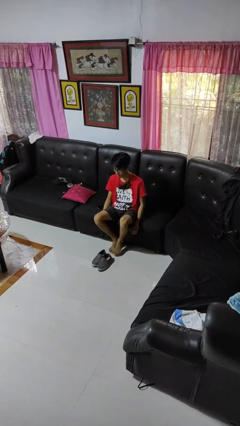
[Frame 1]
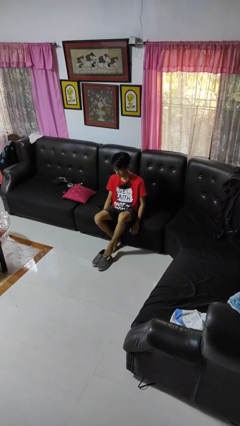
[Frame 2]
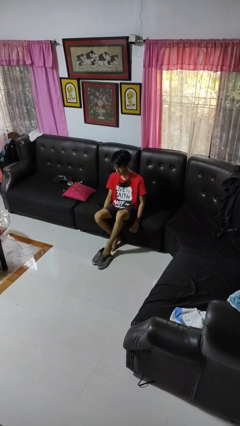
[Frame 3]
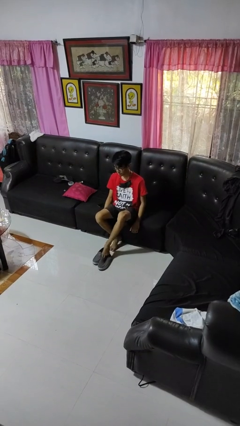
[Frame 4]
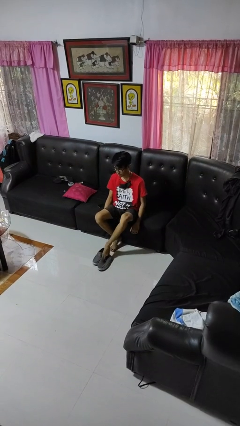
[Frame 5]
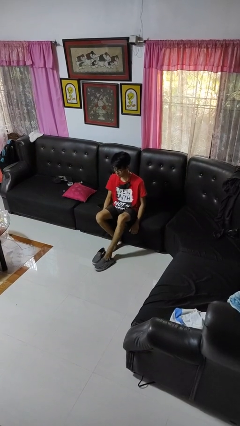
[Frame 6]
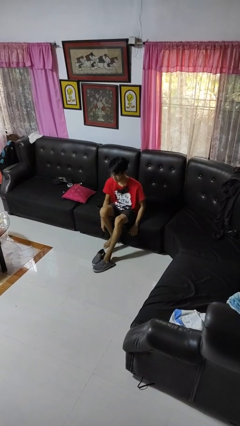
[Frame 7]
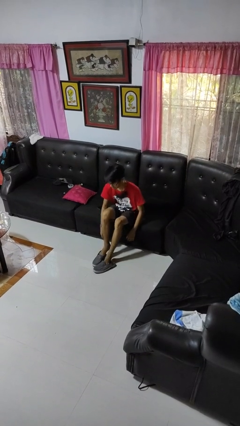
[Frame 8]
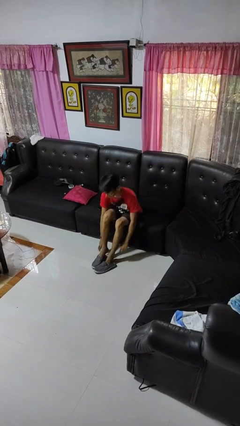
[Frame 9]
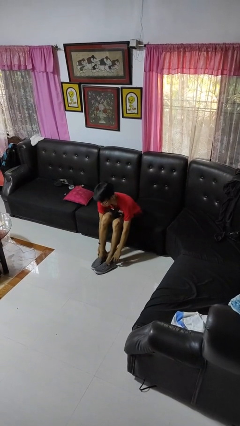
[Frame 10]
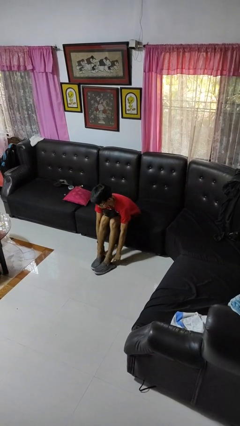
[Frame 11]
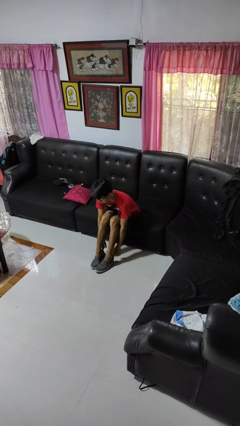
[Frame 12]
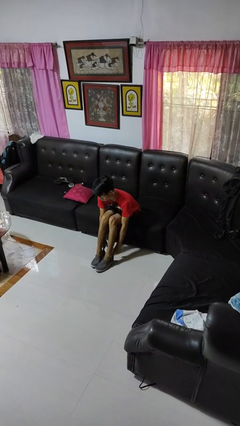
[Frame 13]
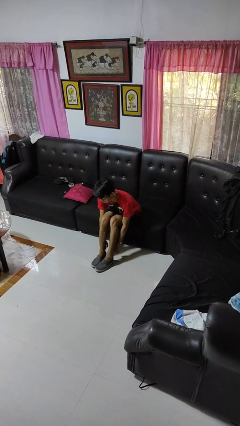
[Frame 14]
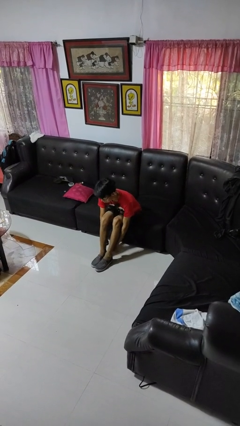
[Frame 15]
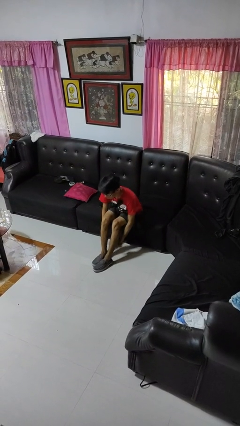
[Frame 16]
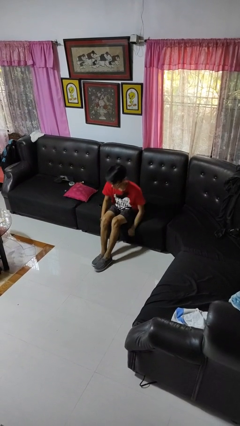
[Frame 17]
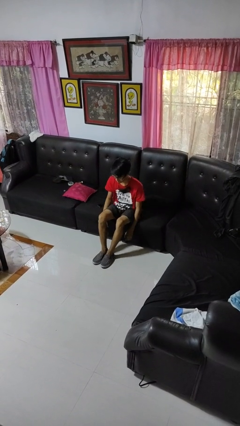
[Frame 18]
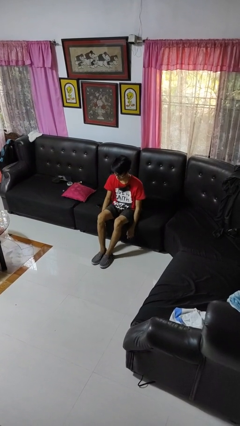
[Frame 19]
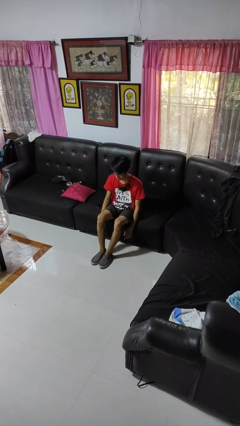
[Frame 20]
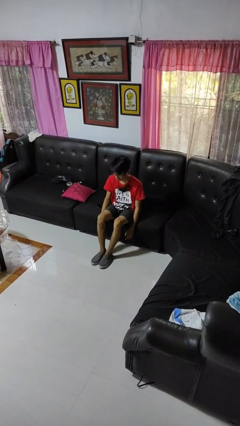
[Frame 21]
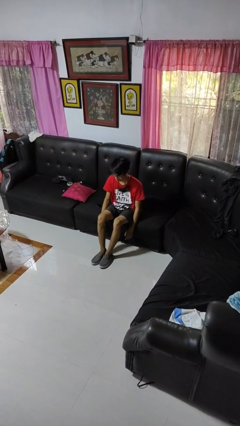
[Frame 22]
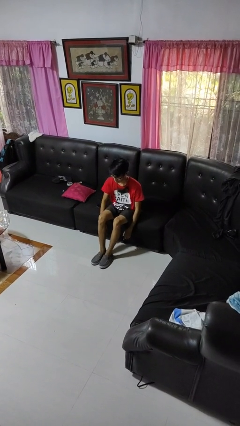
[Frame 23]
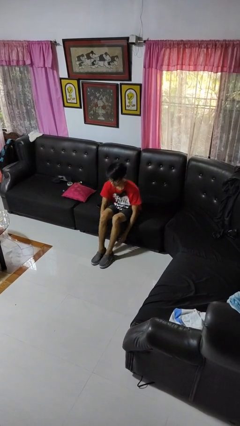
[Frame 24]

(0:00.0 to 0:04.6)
person puts on shoes

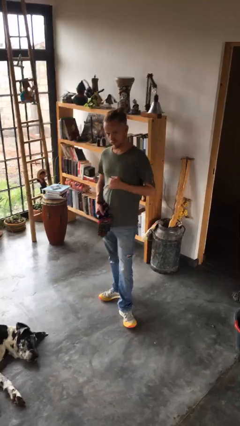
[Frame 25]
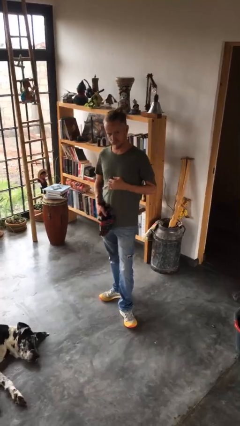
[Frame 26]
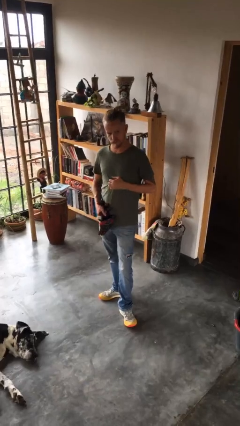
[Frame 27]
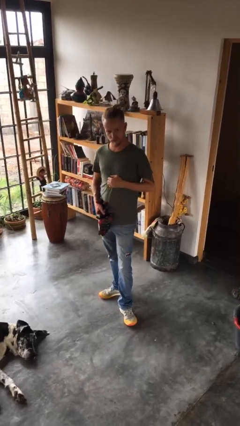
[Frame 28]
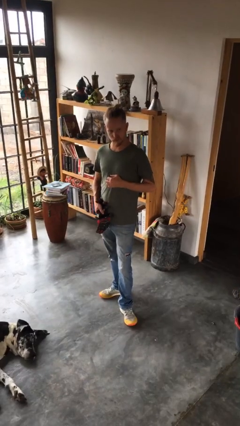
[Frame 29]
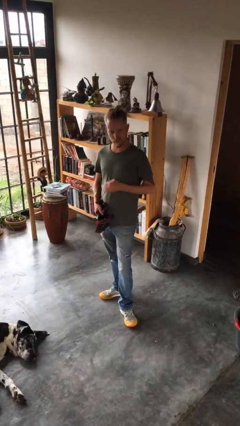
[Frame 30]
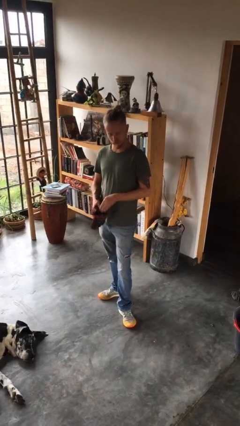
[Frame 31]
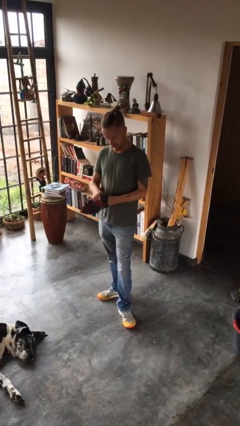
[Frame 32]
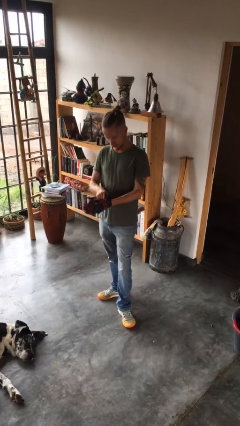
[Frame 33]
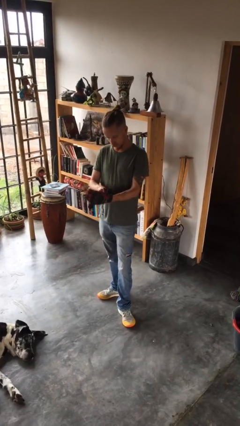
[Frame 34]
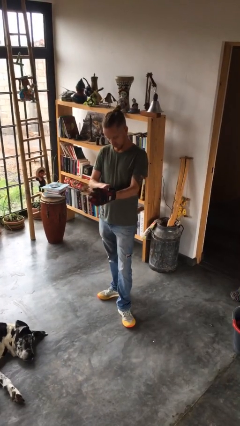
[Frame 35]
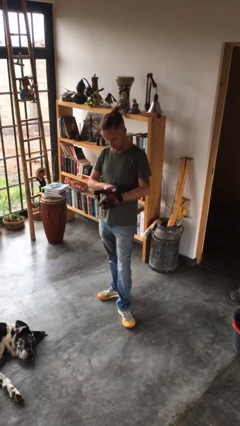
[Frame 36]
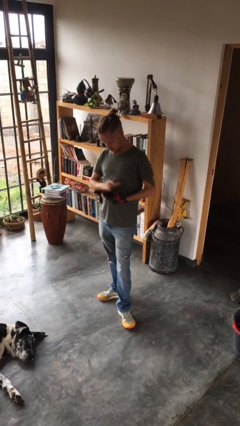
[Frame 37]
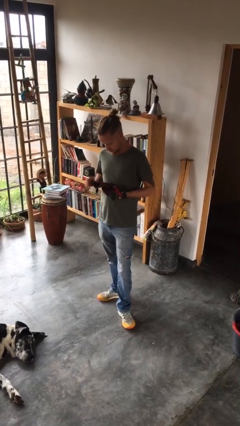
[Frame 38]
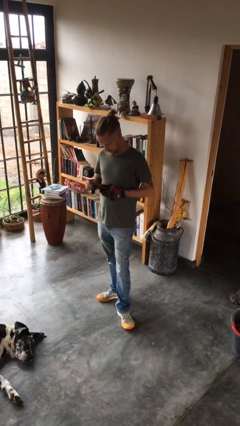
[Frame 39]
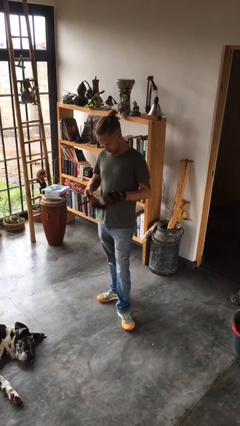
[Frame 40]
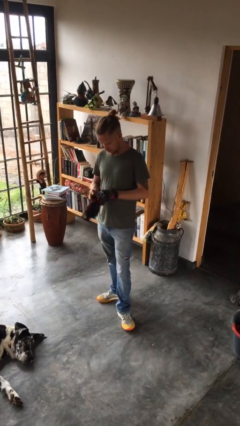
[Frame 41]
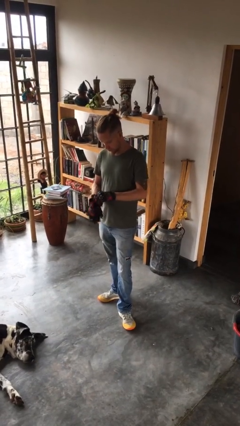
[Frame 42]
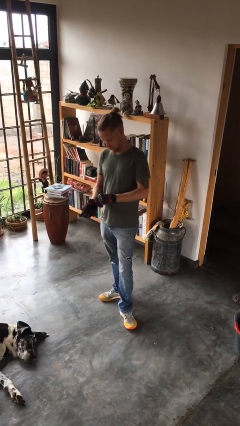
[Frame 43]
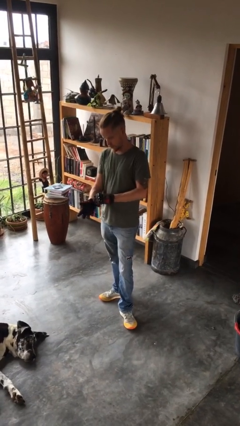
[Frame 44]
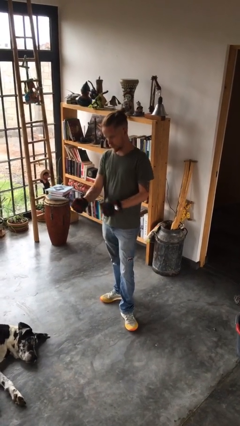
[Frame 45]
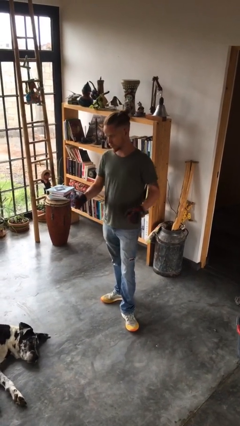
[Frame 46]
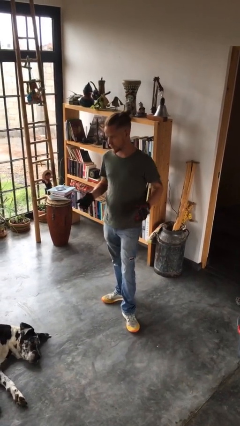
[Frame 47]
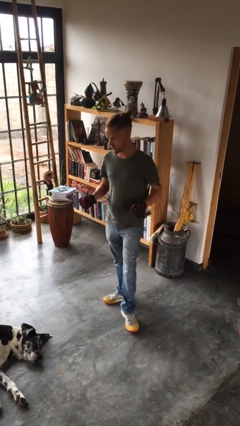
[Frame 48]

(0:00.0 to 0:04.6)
person puts on gloves

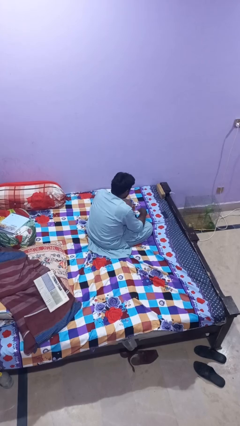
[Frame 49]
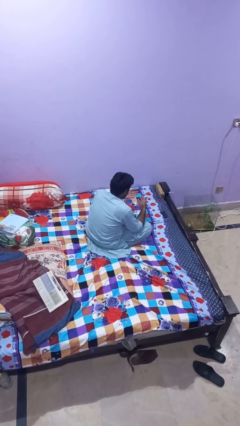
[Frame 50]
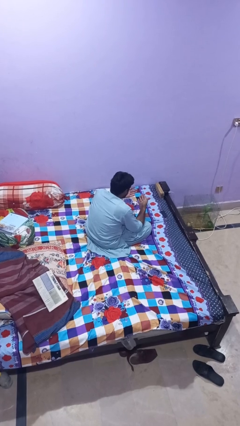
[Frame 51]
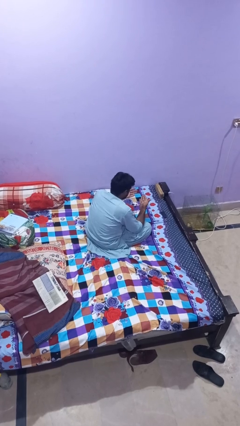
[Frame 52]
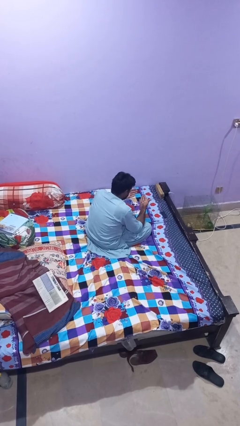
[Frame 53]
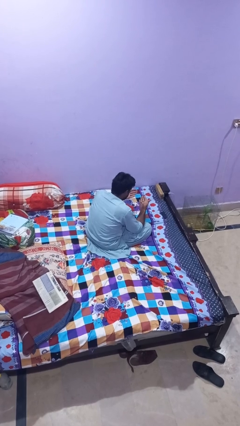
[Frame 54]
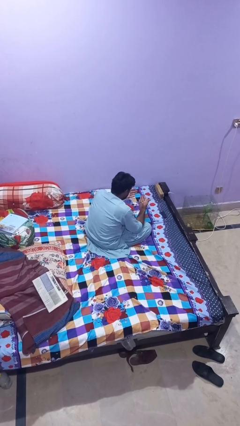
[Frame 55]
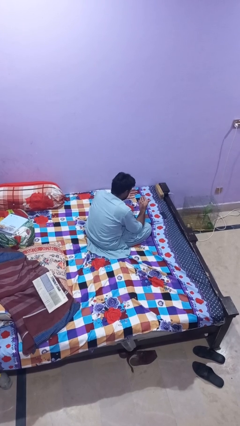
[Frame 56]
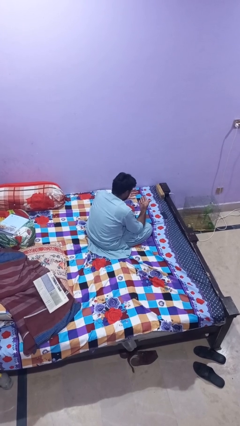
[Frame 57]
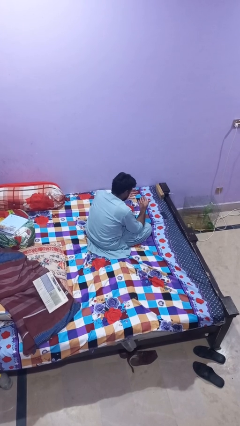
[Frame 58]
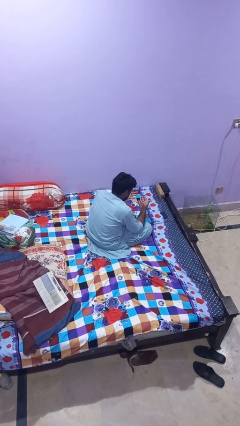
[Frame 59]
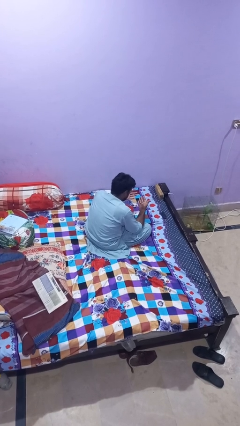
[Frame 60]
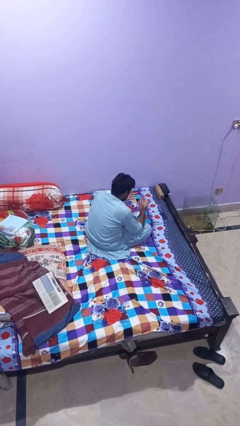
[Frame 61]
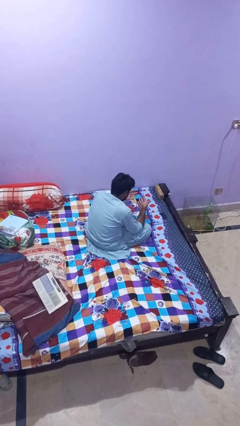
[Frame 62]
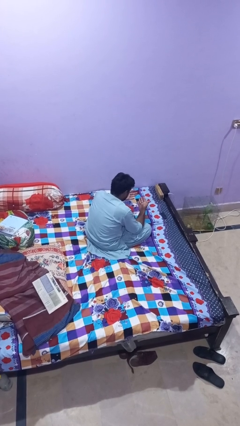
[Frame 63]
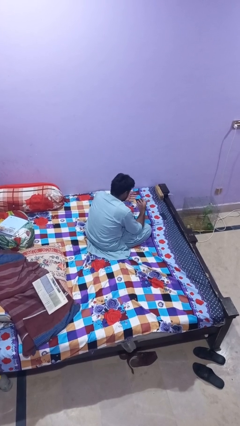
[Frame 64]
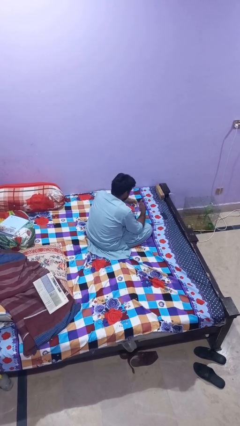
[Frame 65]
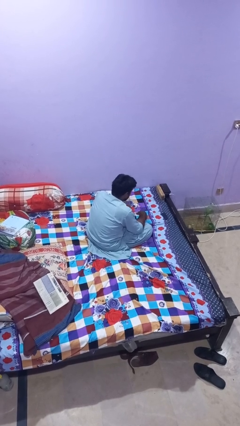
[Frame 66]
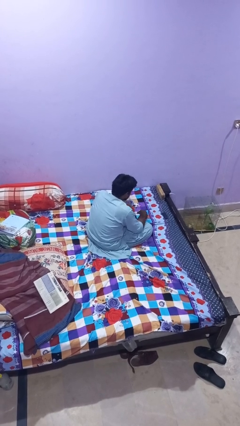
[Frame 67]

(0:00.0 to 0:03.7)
person looks at hands in lap

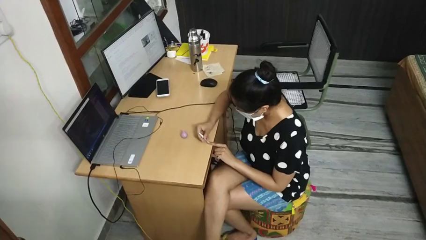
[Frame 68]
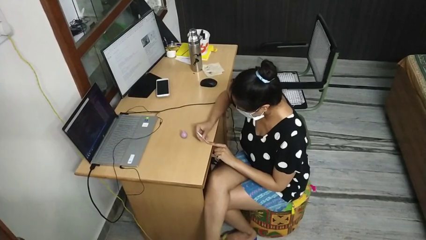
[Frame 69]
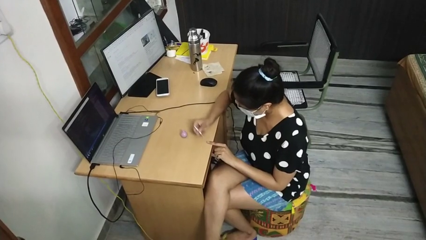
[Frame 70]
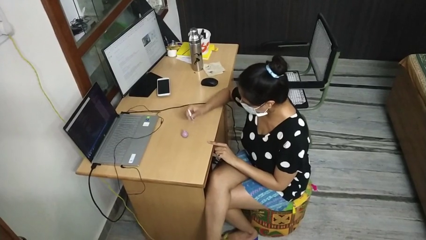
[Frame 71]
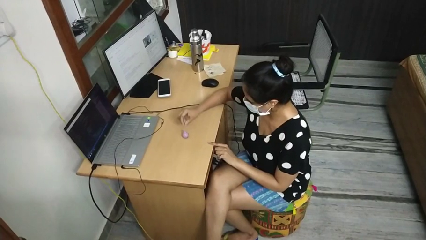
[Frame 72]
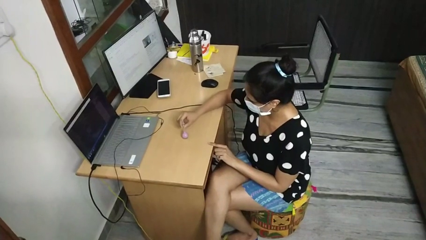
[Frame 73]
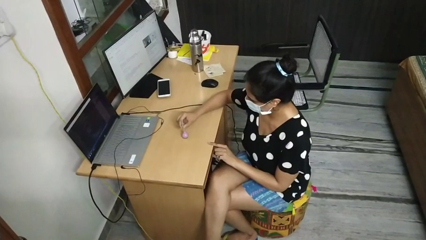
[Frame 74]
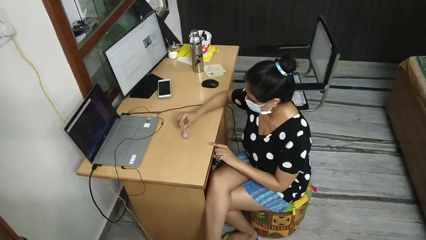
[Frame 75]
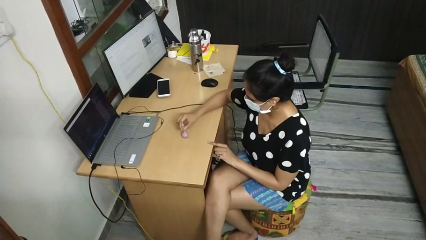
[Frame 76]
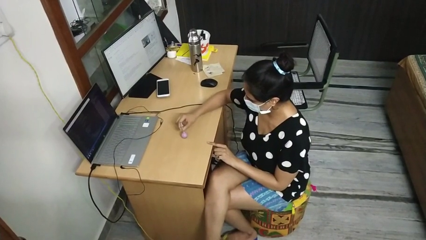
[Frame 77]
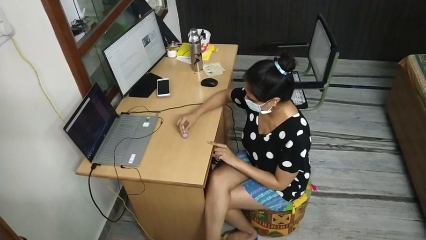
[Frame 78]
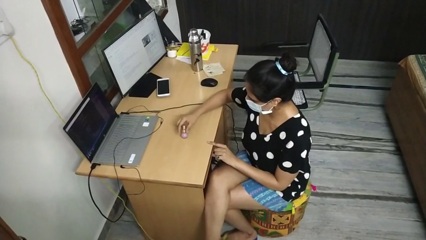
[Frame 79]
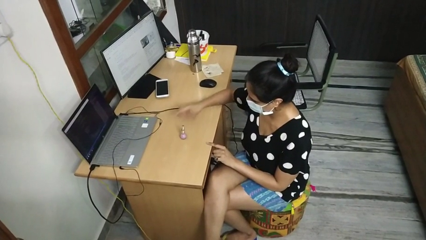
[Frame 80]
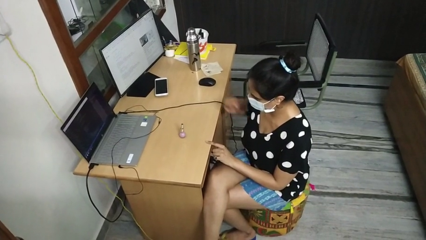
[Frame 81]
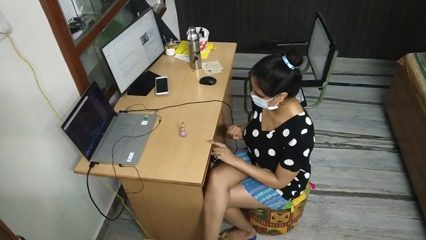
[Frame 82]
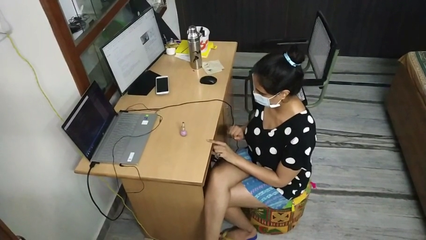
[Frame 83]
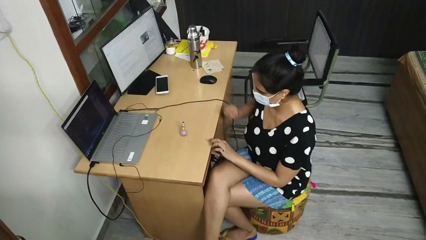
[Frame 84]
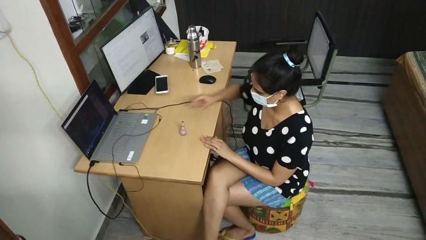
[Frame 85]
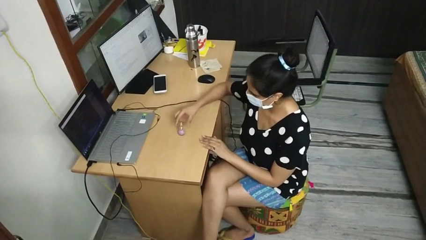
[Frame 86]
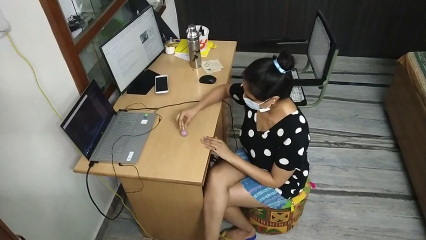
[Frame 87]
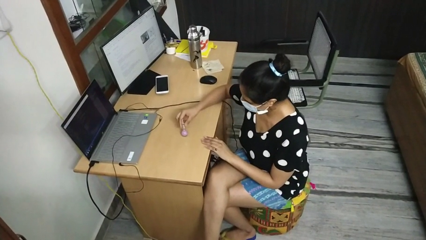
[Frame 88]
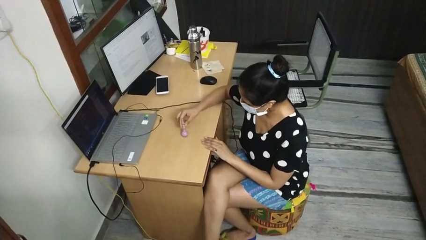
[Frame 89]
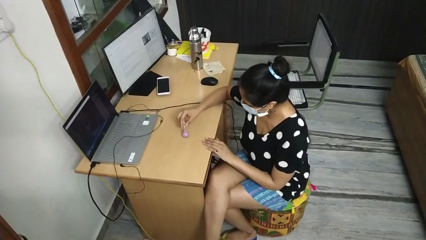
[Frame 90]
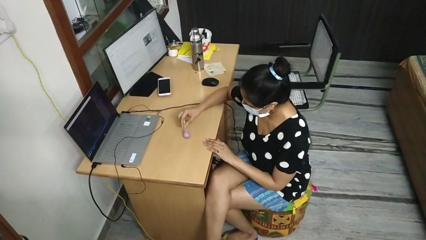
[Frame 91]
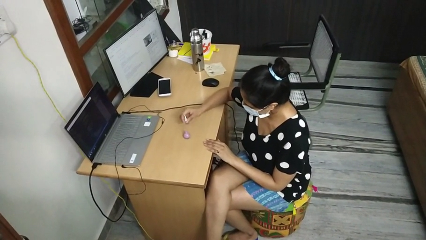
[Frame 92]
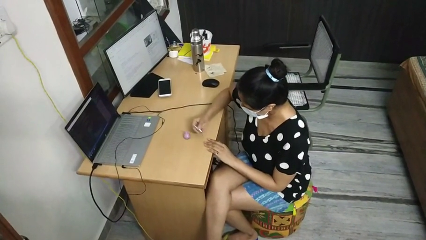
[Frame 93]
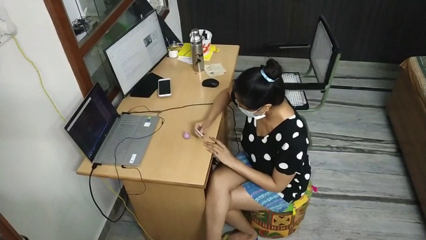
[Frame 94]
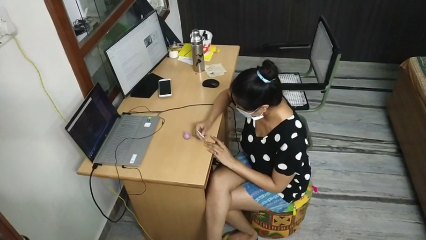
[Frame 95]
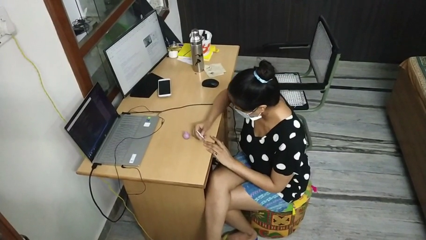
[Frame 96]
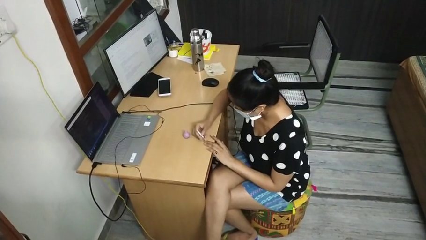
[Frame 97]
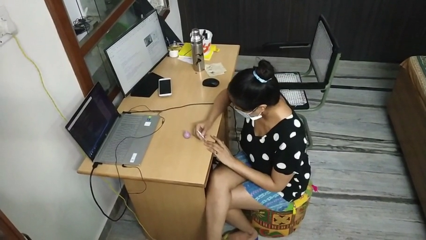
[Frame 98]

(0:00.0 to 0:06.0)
person paints fingernails
